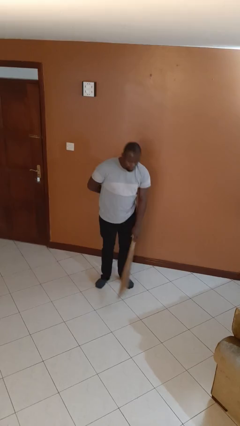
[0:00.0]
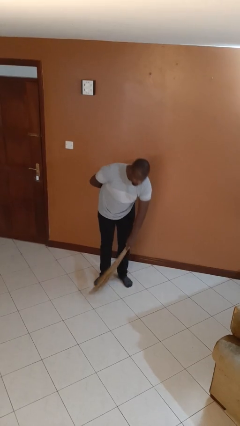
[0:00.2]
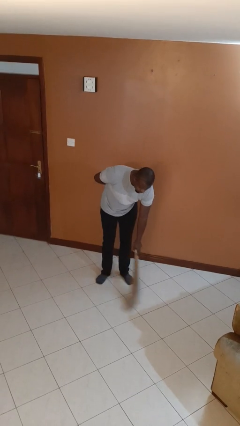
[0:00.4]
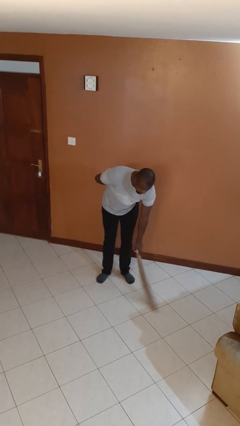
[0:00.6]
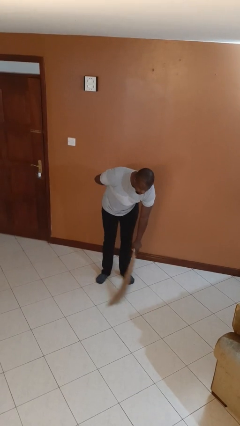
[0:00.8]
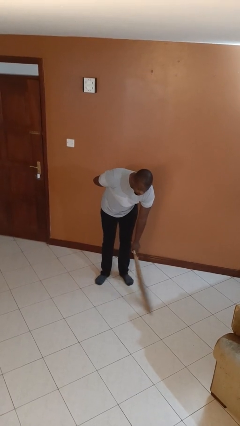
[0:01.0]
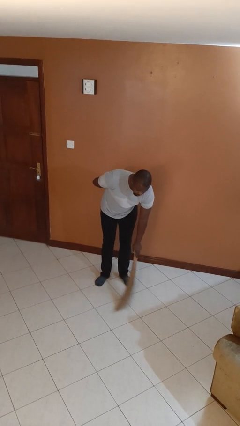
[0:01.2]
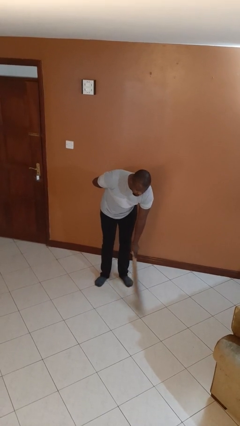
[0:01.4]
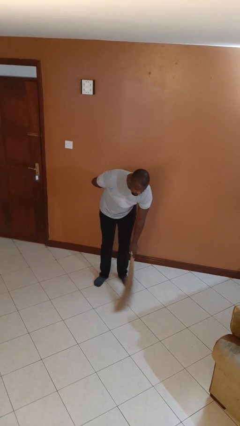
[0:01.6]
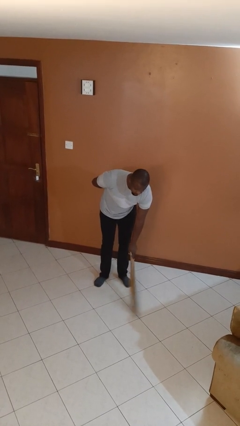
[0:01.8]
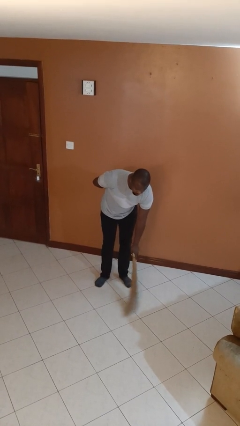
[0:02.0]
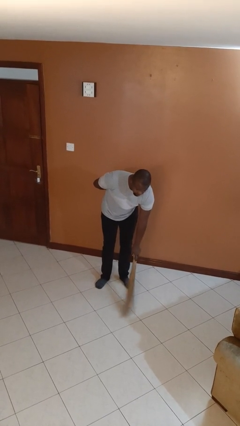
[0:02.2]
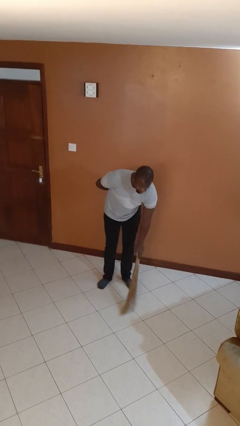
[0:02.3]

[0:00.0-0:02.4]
person sweeps floor

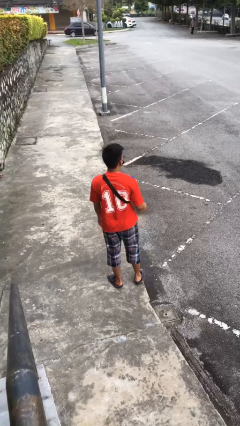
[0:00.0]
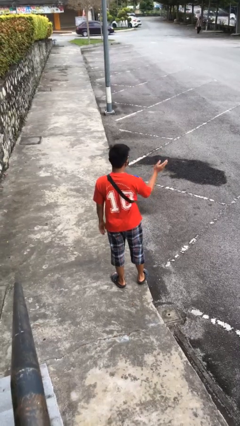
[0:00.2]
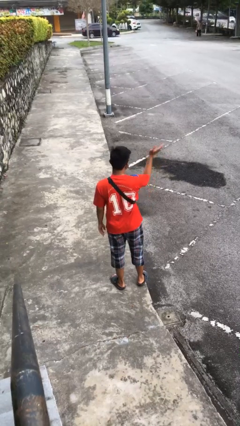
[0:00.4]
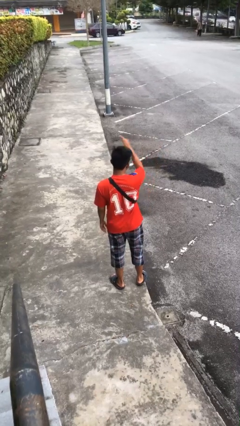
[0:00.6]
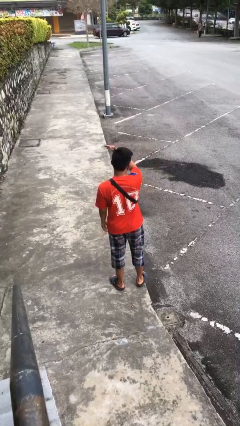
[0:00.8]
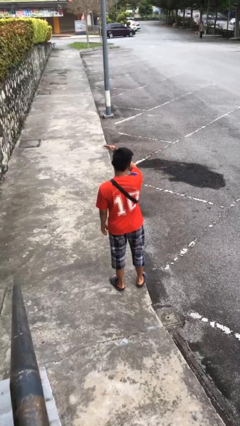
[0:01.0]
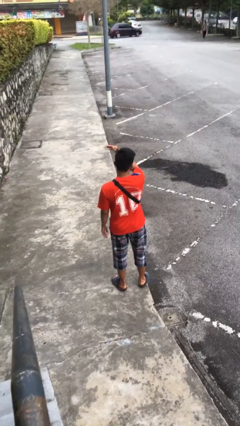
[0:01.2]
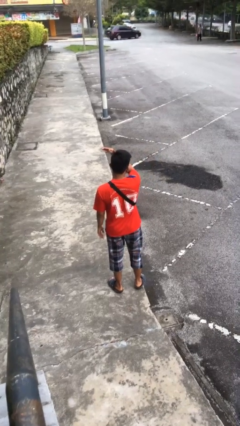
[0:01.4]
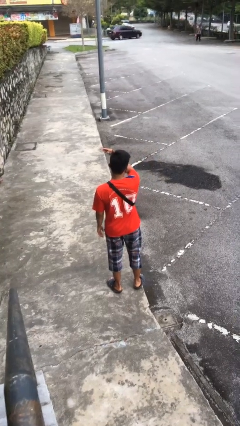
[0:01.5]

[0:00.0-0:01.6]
person gestures swipe left

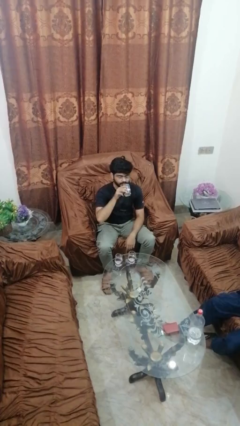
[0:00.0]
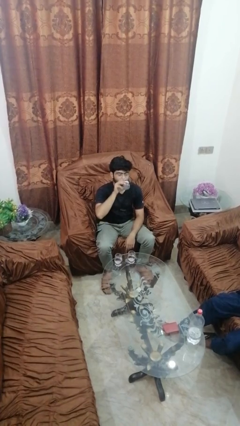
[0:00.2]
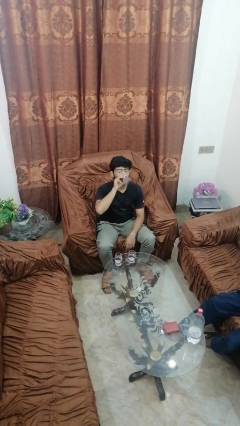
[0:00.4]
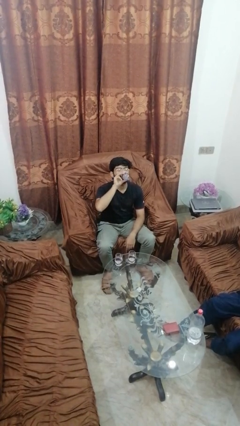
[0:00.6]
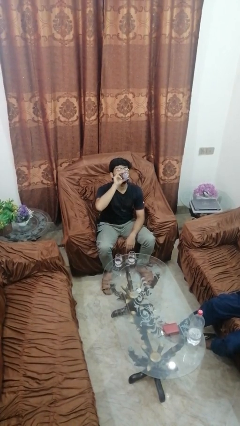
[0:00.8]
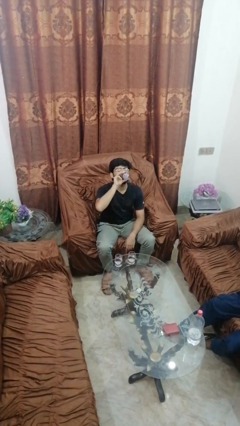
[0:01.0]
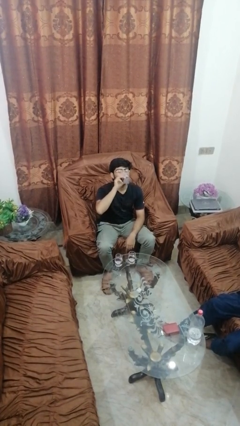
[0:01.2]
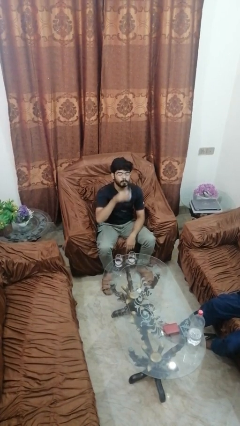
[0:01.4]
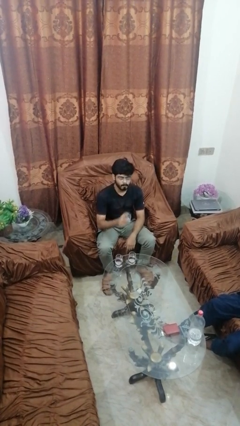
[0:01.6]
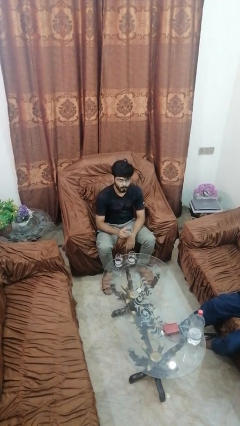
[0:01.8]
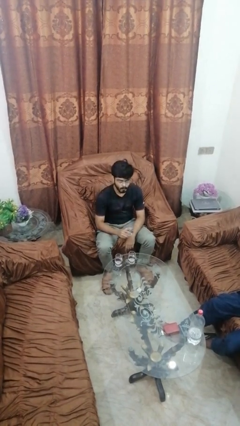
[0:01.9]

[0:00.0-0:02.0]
person drinks from shotglass

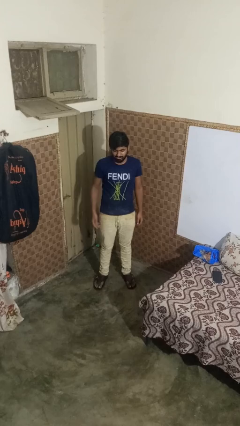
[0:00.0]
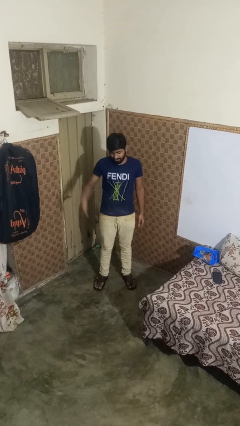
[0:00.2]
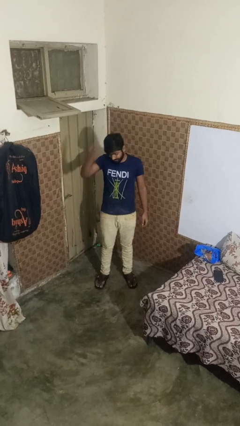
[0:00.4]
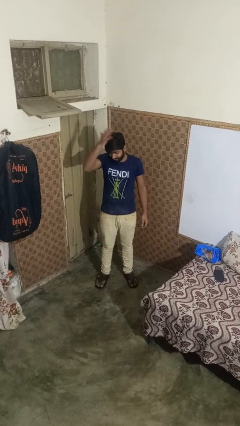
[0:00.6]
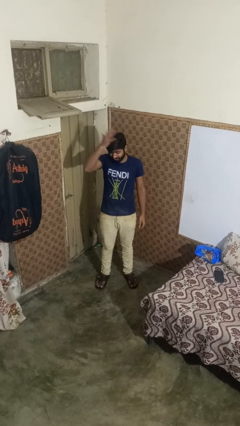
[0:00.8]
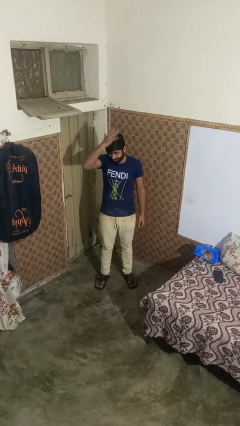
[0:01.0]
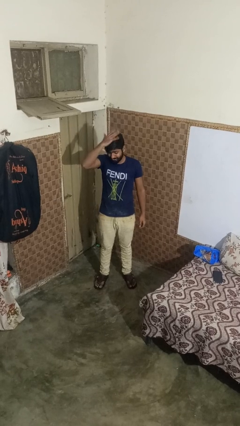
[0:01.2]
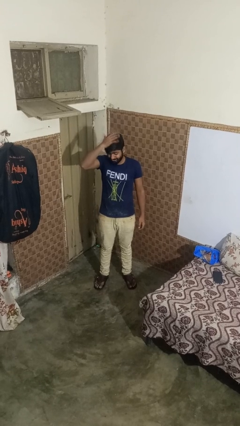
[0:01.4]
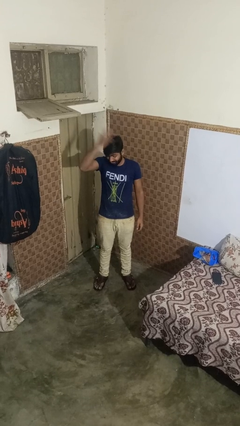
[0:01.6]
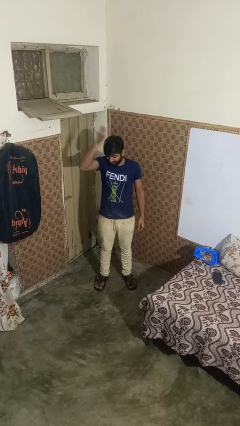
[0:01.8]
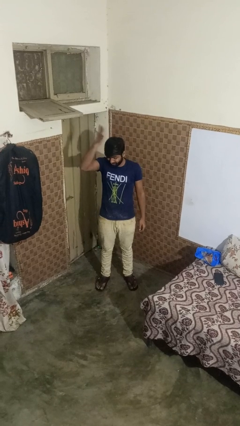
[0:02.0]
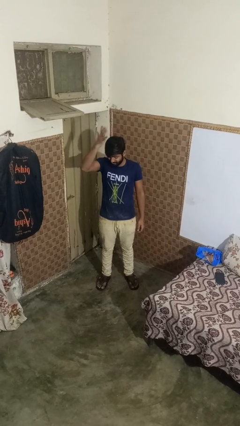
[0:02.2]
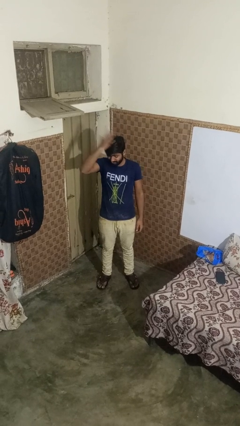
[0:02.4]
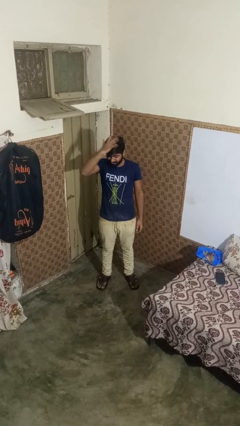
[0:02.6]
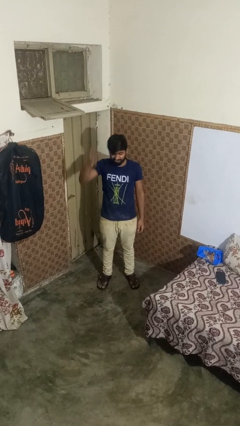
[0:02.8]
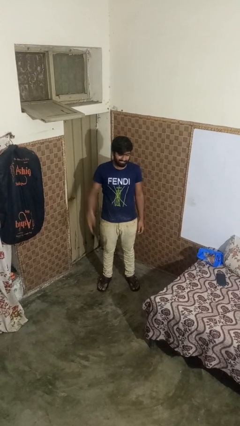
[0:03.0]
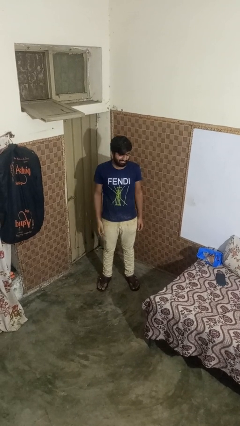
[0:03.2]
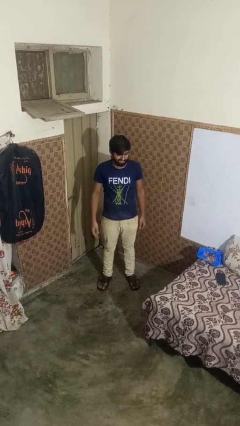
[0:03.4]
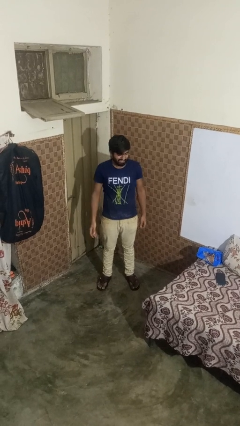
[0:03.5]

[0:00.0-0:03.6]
person pats head

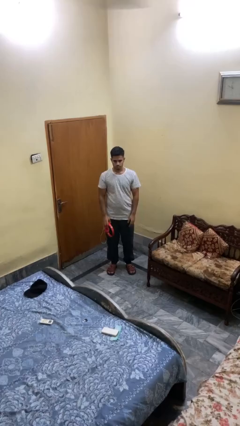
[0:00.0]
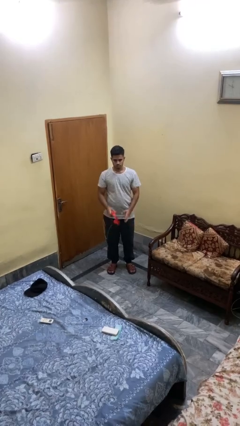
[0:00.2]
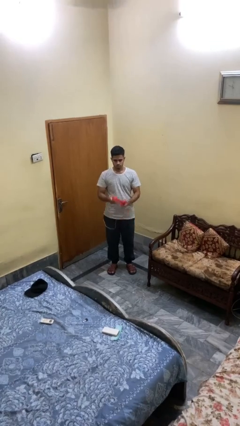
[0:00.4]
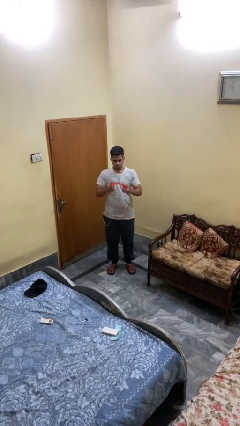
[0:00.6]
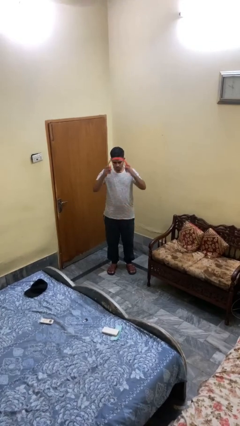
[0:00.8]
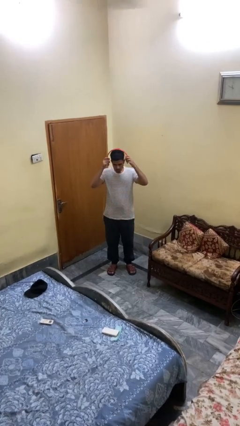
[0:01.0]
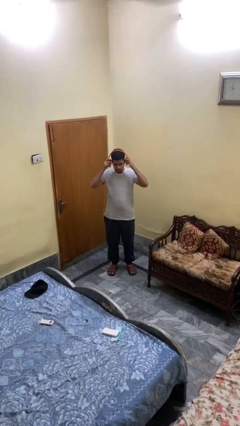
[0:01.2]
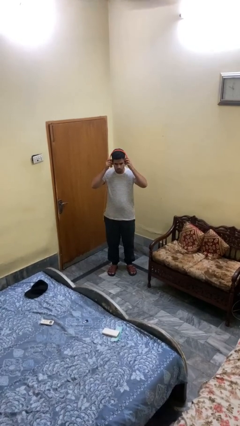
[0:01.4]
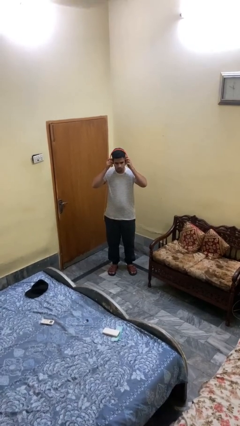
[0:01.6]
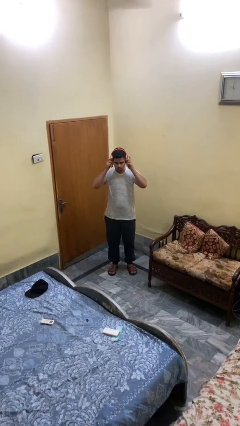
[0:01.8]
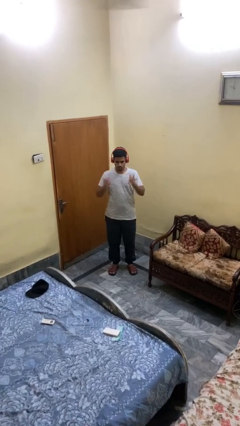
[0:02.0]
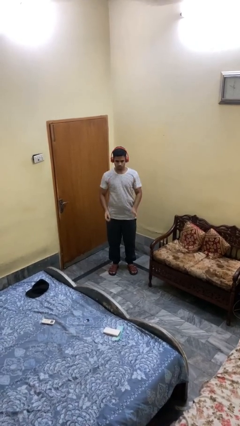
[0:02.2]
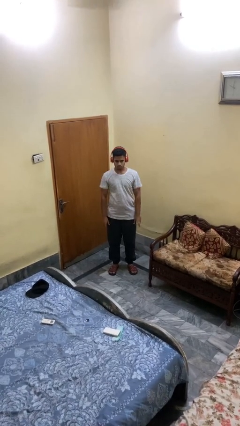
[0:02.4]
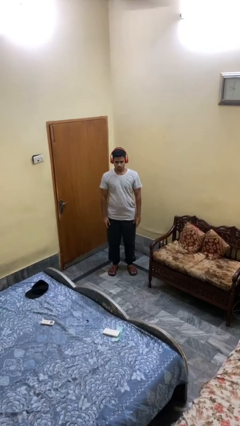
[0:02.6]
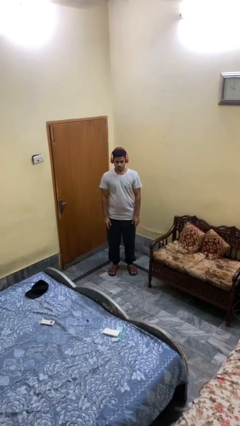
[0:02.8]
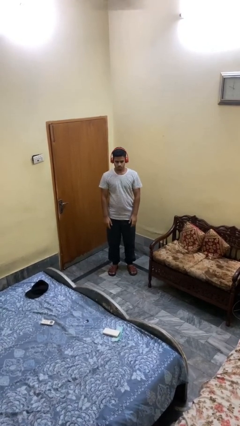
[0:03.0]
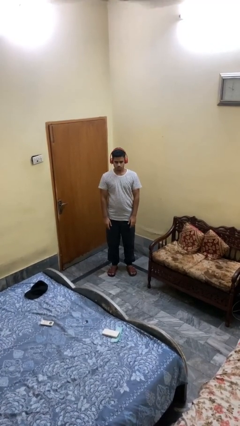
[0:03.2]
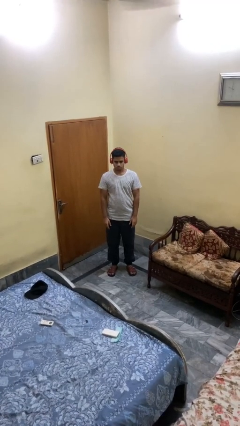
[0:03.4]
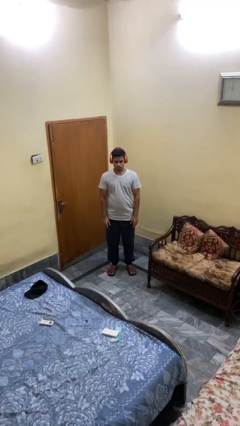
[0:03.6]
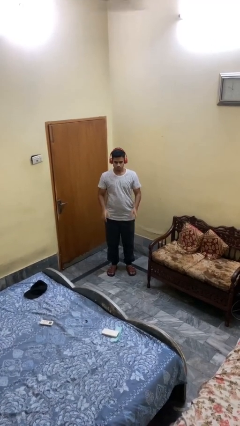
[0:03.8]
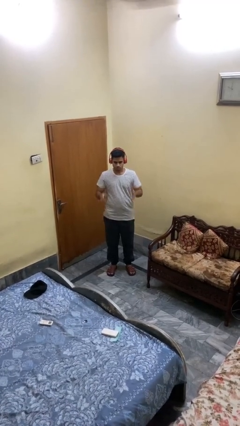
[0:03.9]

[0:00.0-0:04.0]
person puts on headphones

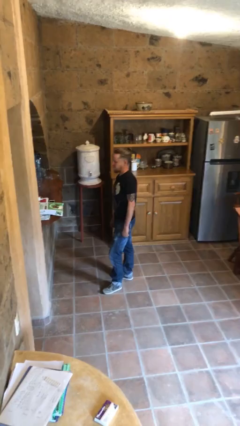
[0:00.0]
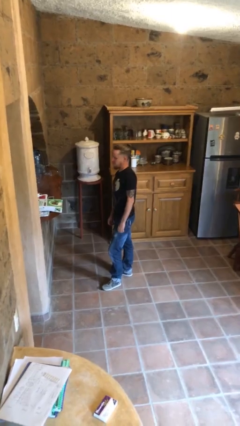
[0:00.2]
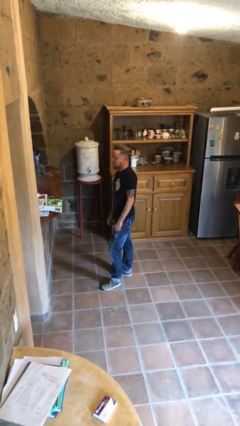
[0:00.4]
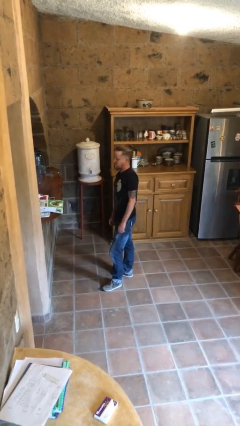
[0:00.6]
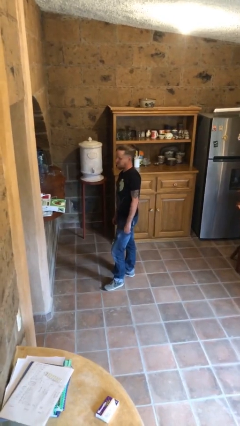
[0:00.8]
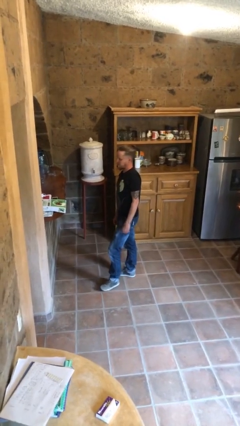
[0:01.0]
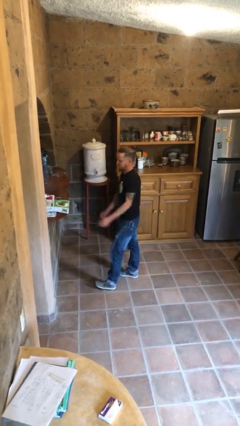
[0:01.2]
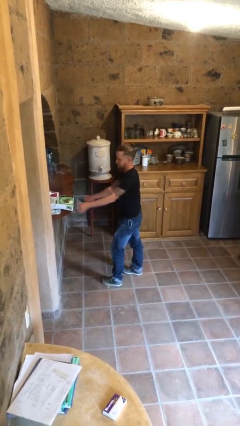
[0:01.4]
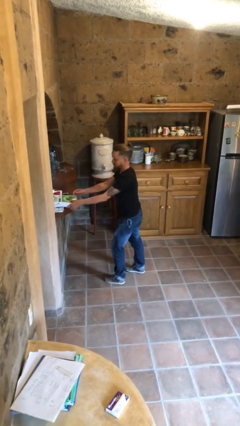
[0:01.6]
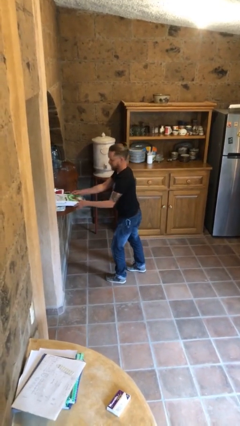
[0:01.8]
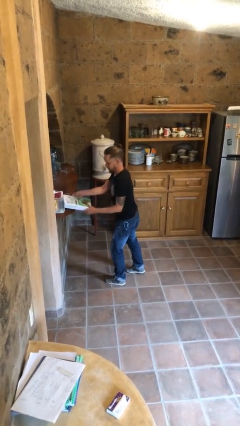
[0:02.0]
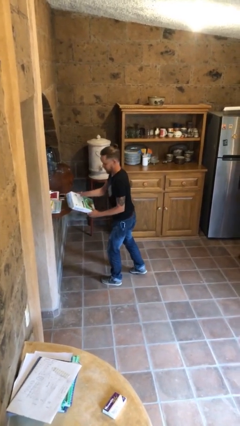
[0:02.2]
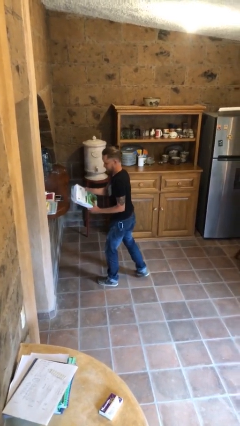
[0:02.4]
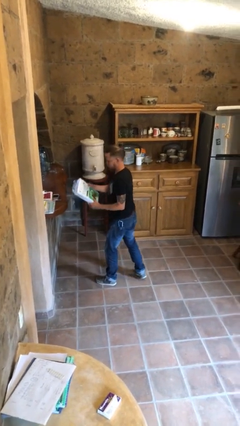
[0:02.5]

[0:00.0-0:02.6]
person picks up object from table

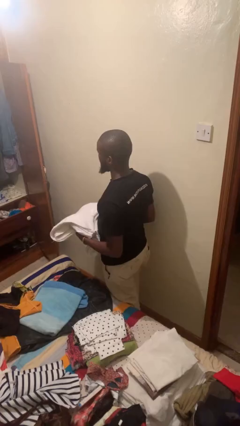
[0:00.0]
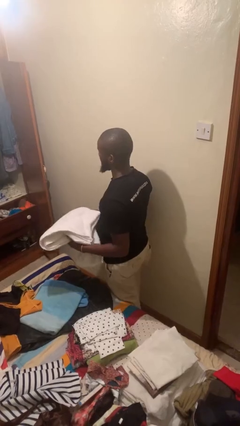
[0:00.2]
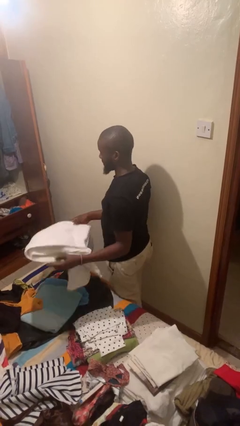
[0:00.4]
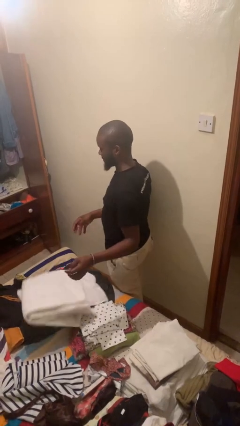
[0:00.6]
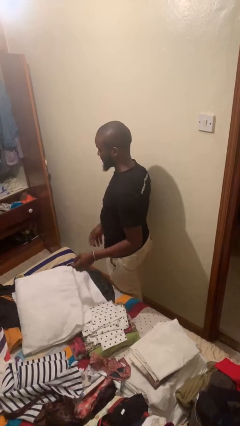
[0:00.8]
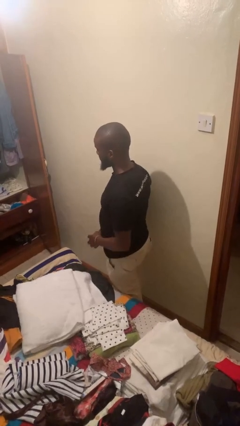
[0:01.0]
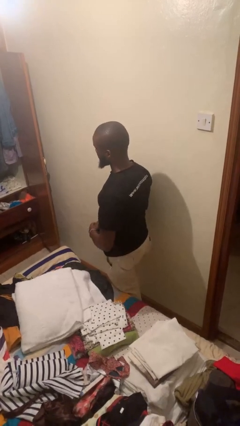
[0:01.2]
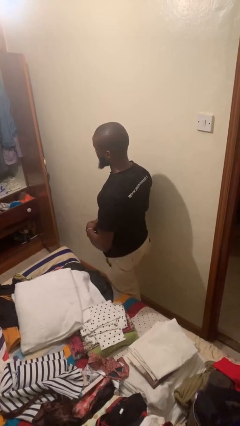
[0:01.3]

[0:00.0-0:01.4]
person throws object on bed
